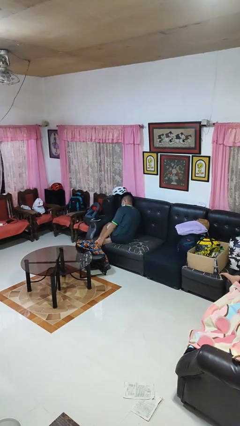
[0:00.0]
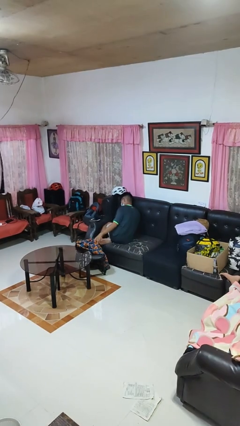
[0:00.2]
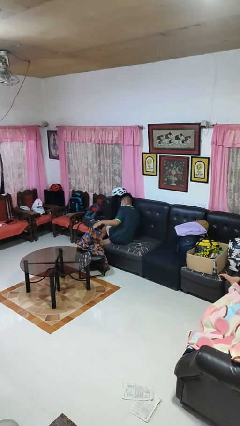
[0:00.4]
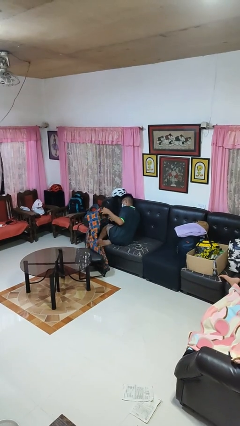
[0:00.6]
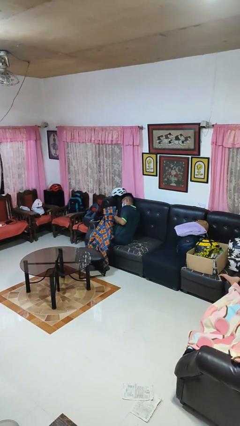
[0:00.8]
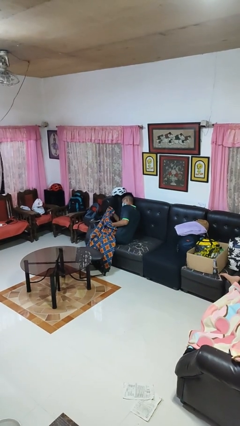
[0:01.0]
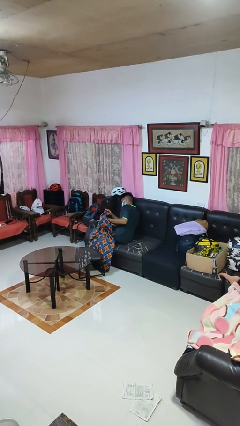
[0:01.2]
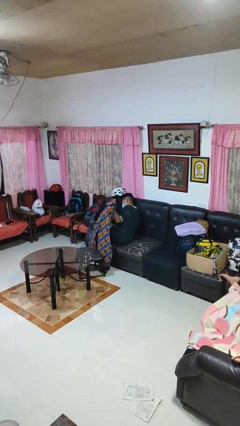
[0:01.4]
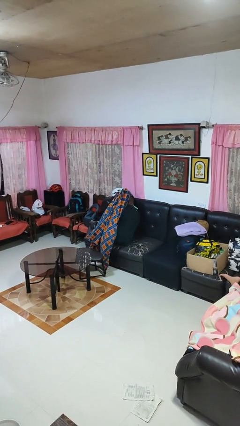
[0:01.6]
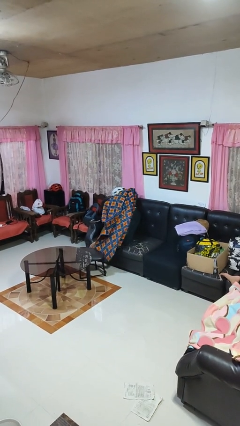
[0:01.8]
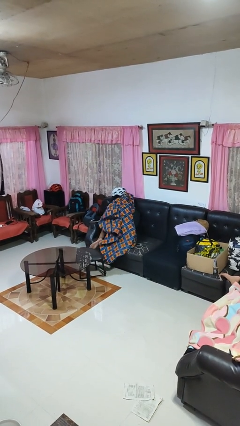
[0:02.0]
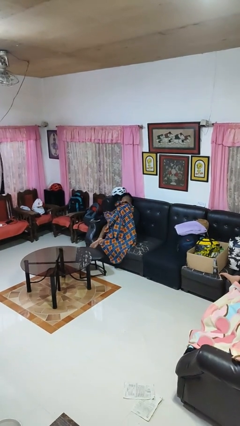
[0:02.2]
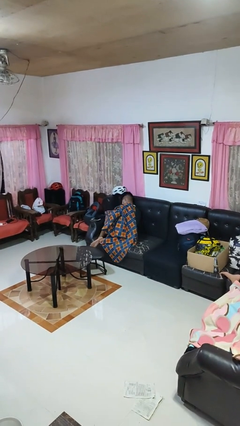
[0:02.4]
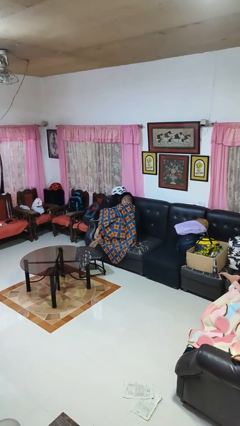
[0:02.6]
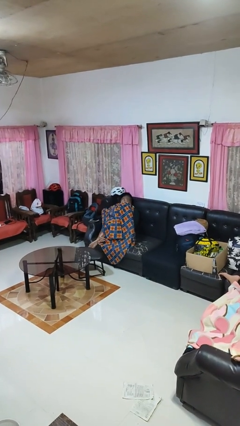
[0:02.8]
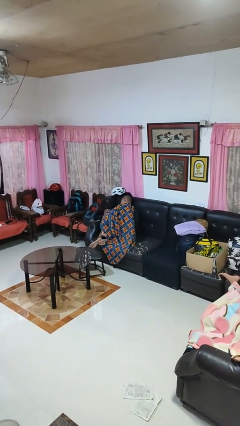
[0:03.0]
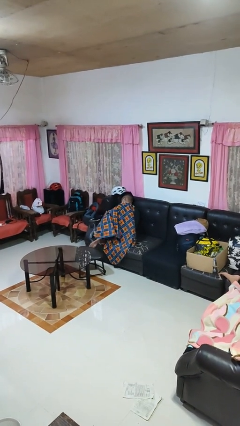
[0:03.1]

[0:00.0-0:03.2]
person covers with blanket

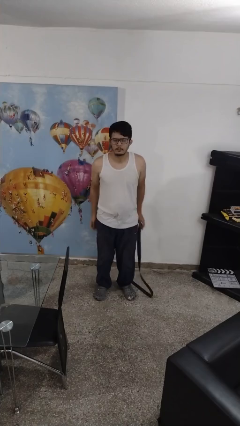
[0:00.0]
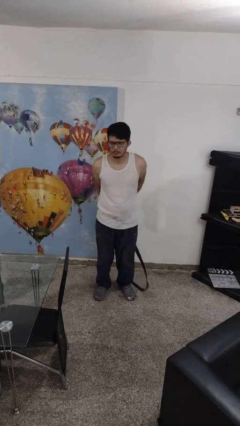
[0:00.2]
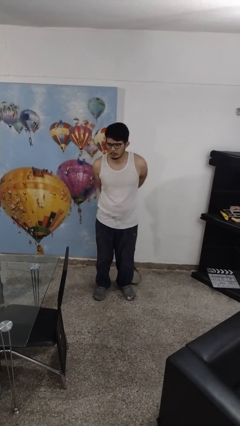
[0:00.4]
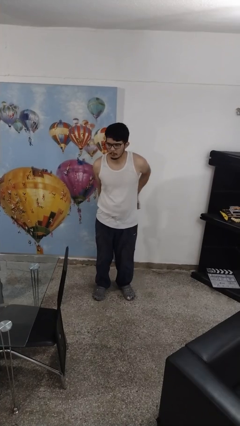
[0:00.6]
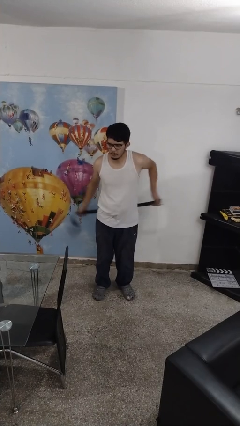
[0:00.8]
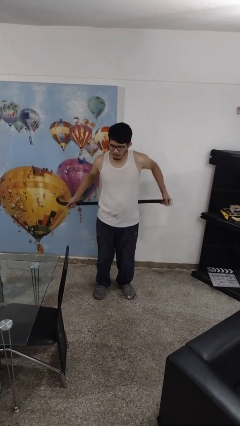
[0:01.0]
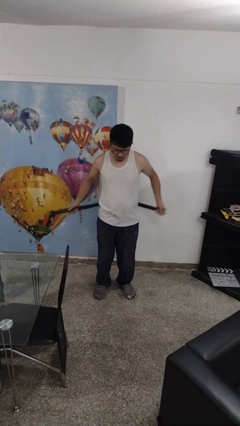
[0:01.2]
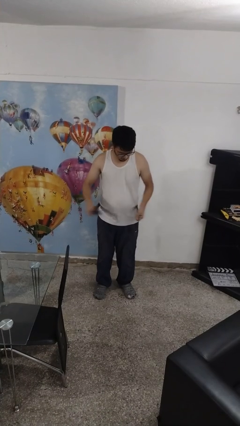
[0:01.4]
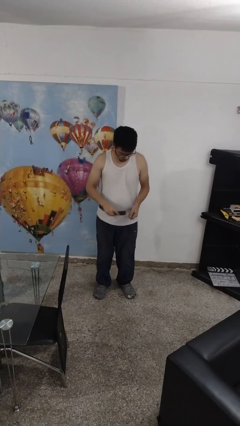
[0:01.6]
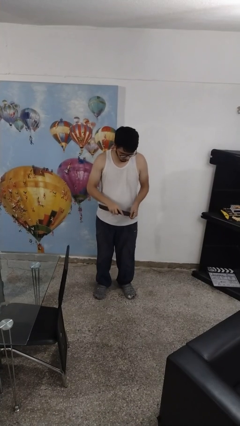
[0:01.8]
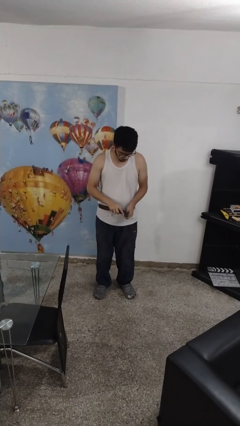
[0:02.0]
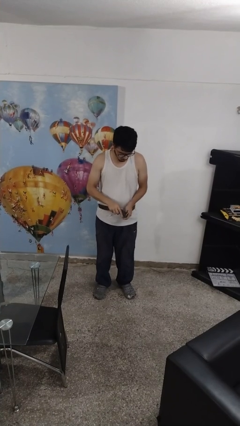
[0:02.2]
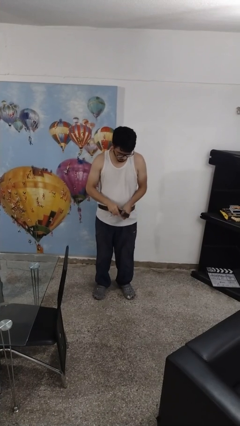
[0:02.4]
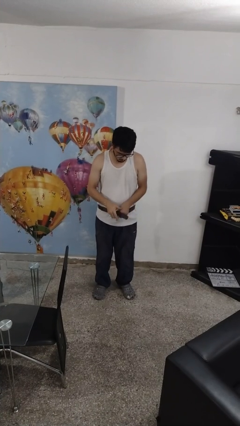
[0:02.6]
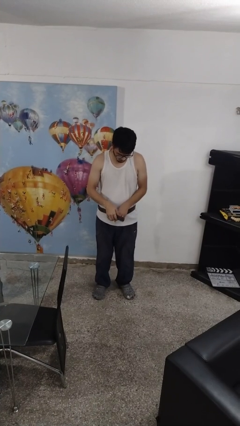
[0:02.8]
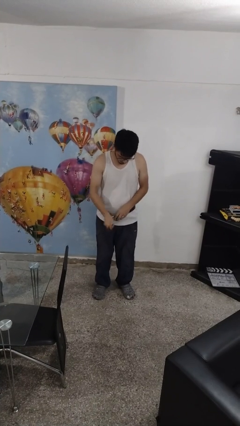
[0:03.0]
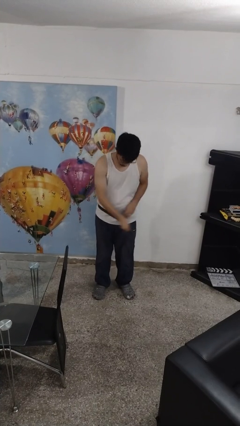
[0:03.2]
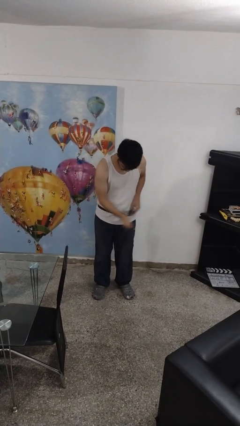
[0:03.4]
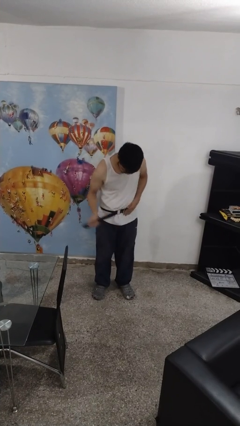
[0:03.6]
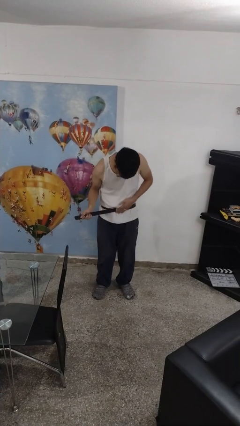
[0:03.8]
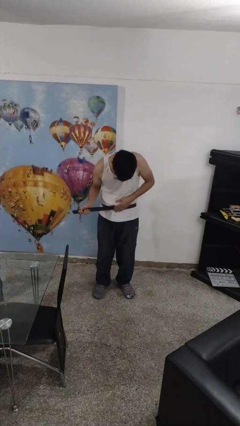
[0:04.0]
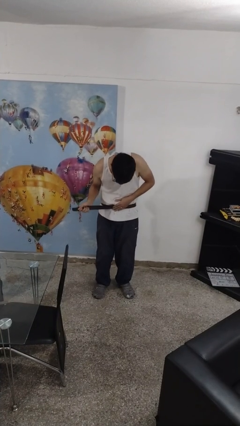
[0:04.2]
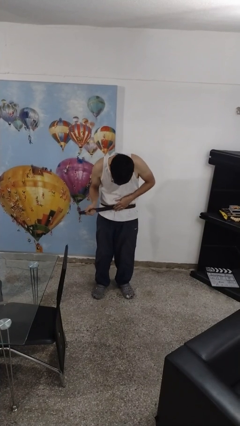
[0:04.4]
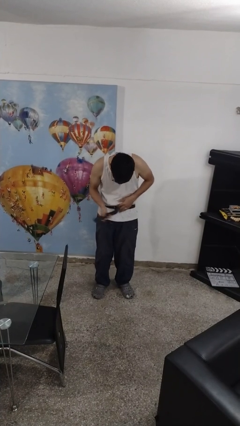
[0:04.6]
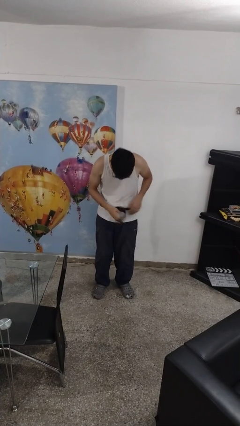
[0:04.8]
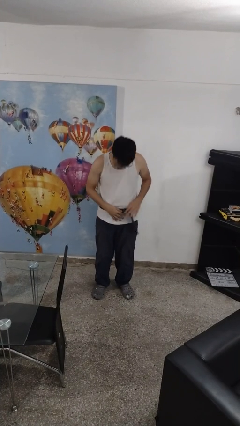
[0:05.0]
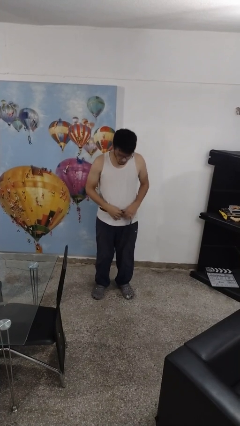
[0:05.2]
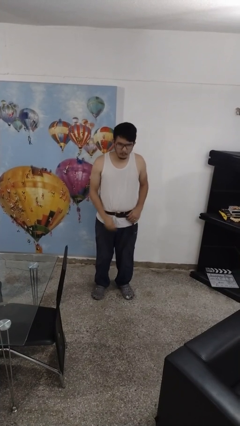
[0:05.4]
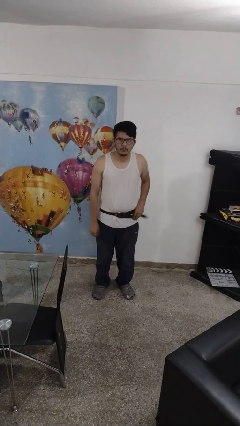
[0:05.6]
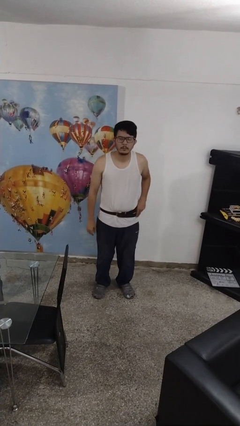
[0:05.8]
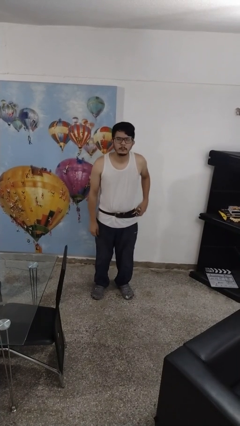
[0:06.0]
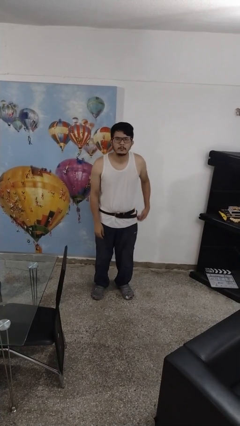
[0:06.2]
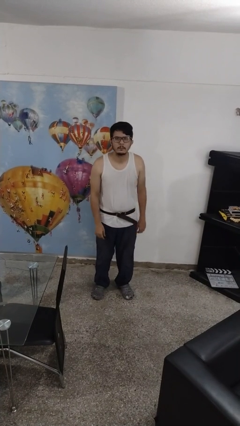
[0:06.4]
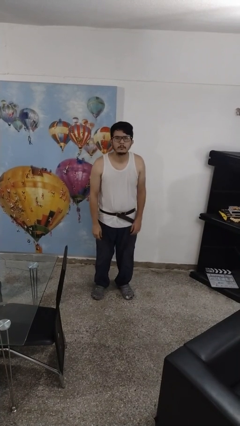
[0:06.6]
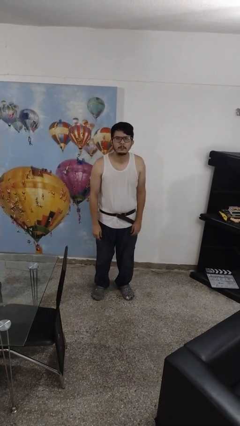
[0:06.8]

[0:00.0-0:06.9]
person puts on belt

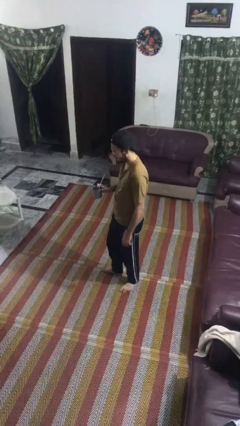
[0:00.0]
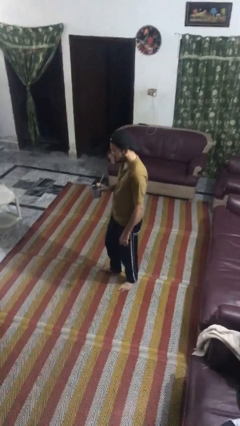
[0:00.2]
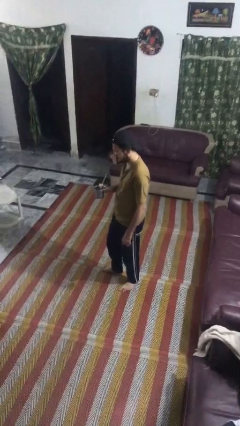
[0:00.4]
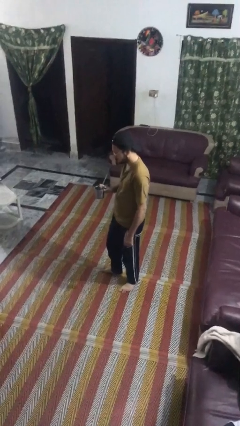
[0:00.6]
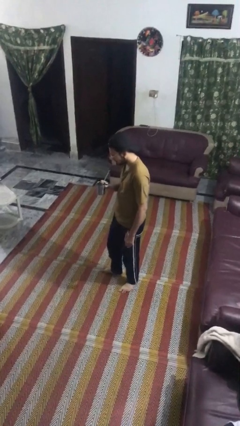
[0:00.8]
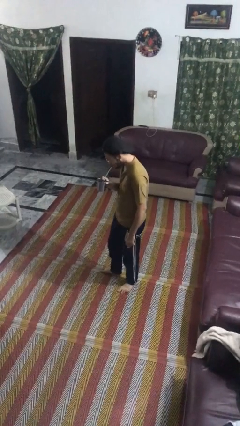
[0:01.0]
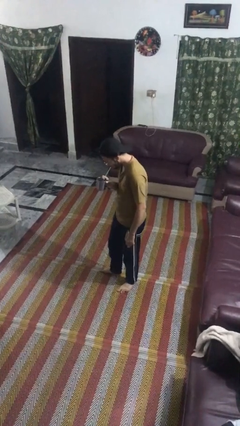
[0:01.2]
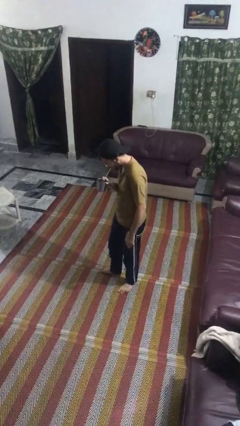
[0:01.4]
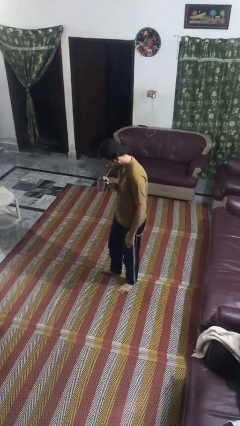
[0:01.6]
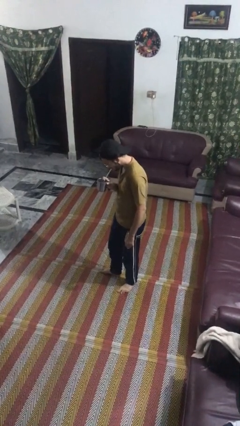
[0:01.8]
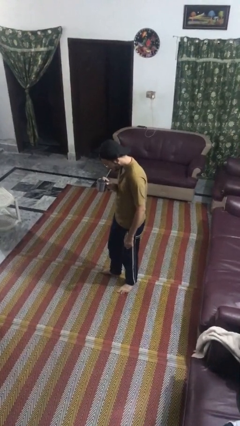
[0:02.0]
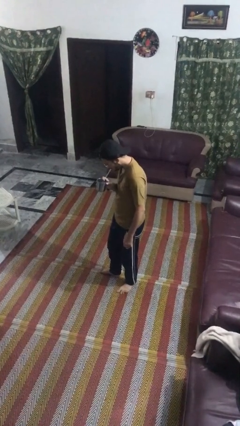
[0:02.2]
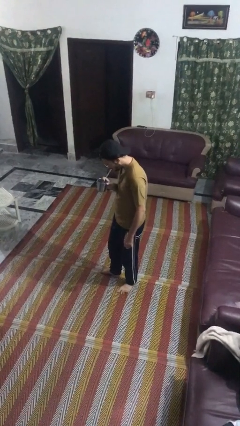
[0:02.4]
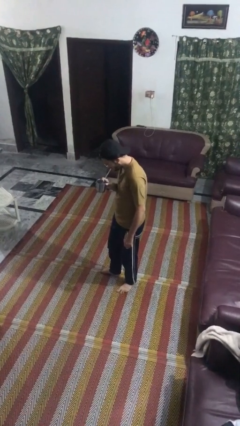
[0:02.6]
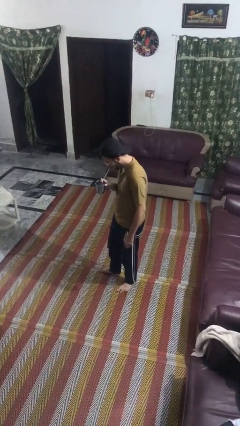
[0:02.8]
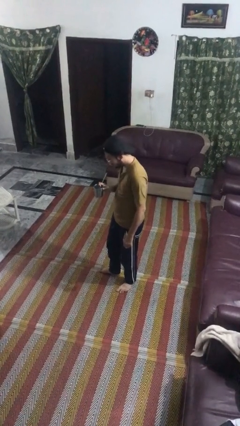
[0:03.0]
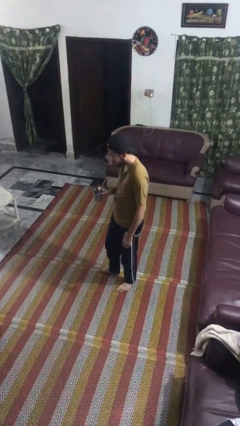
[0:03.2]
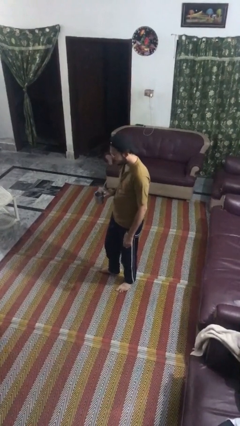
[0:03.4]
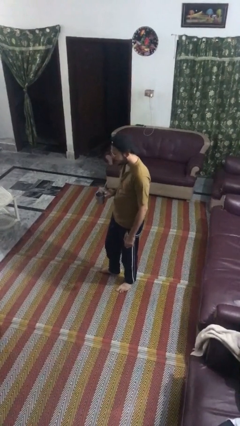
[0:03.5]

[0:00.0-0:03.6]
person drinks from straw

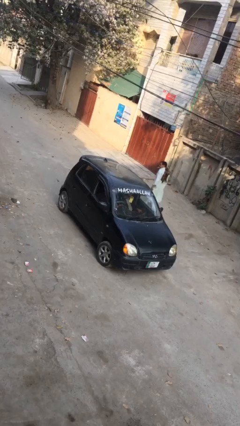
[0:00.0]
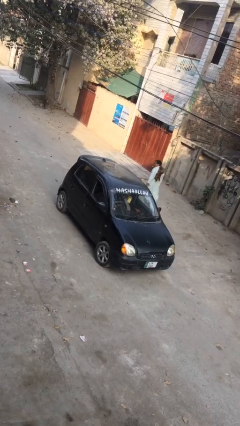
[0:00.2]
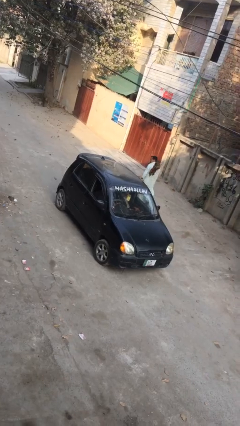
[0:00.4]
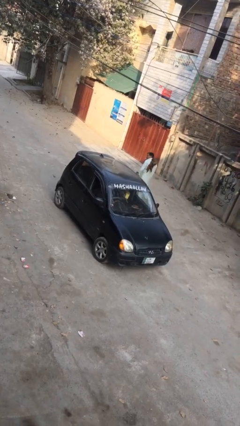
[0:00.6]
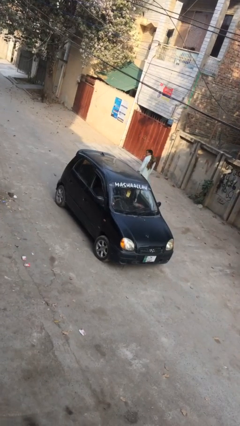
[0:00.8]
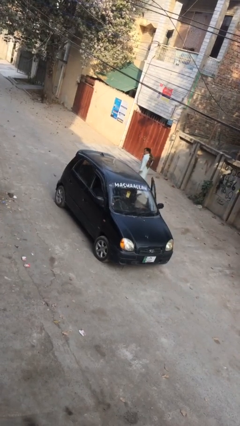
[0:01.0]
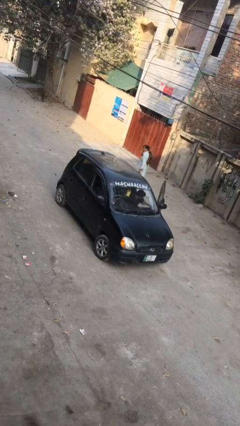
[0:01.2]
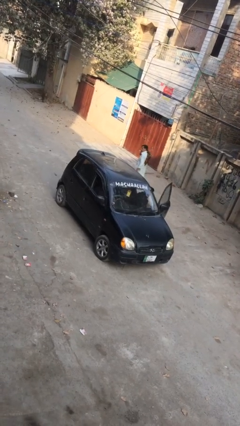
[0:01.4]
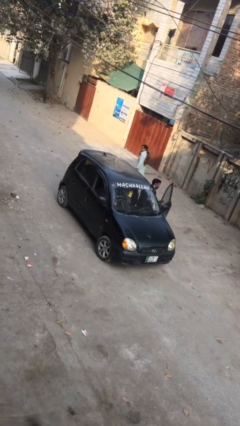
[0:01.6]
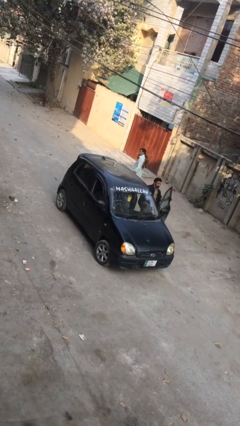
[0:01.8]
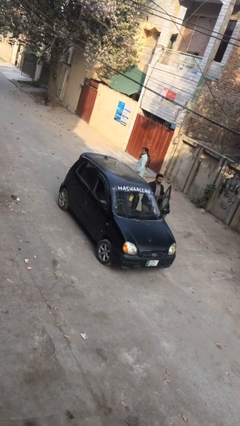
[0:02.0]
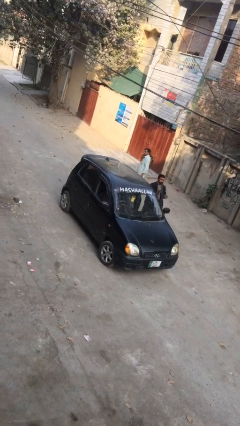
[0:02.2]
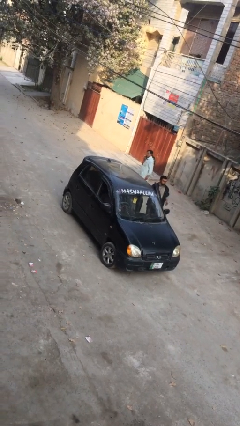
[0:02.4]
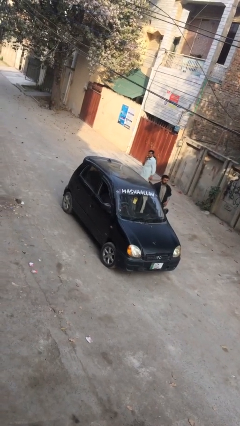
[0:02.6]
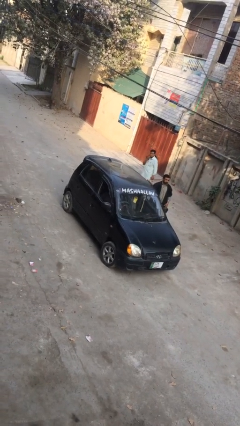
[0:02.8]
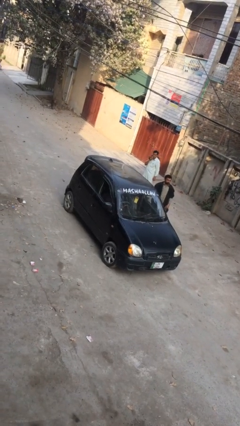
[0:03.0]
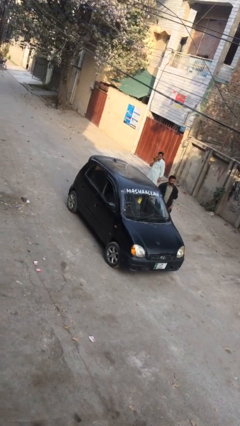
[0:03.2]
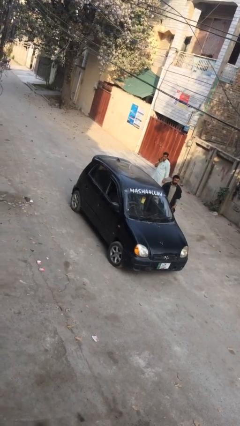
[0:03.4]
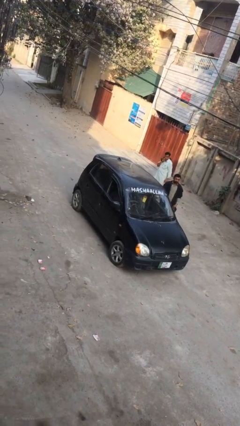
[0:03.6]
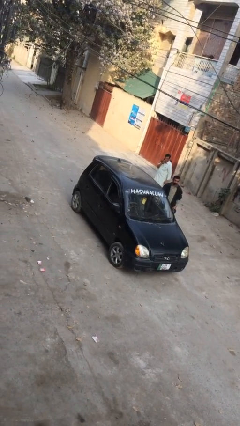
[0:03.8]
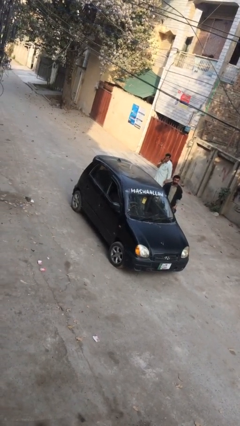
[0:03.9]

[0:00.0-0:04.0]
car drops off person
